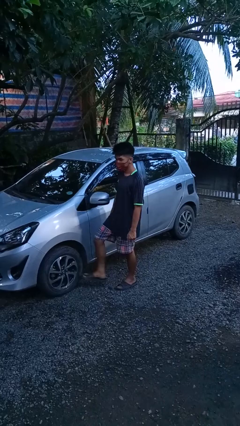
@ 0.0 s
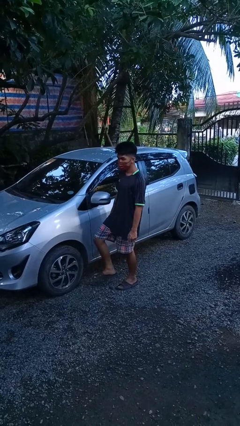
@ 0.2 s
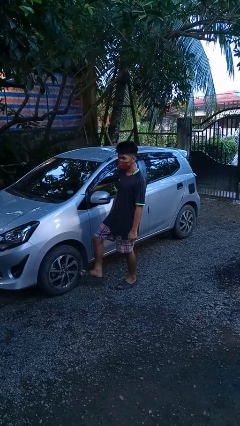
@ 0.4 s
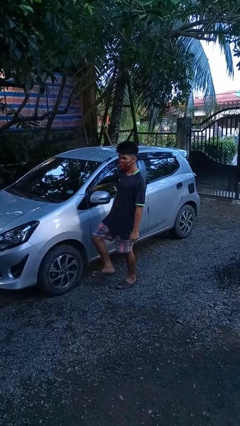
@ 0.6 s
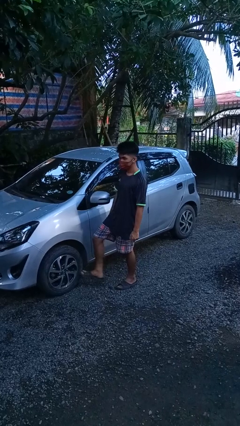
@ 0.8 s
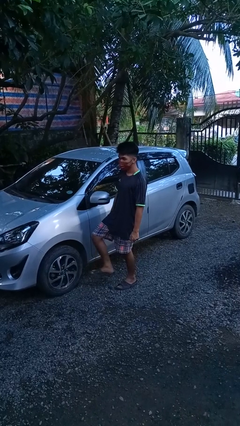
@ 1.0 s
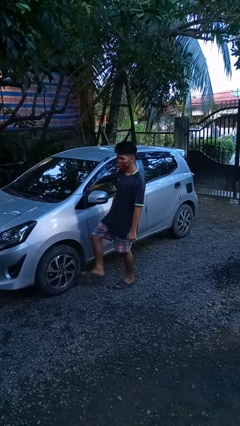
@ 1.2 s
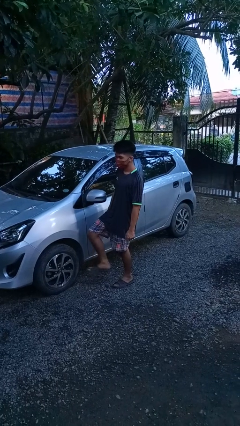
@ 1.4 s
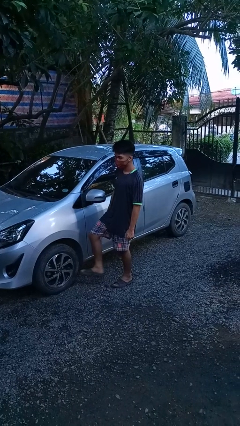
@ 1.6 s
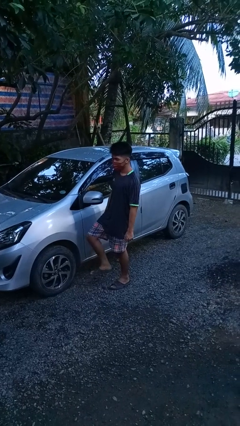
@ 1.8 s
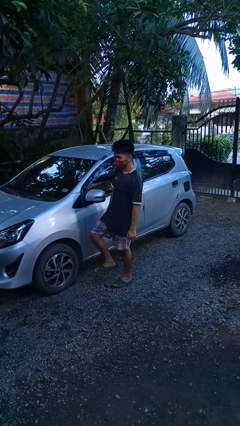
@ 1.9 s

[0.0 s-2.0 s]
person kicks car tires

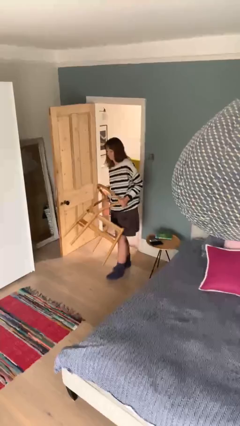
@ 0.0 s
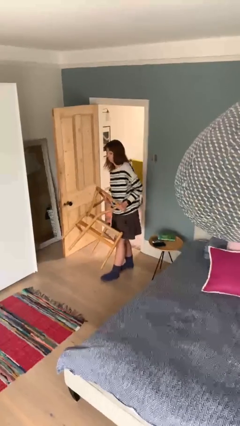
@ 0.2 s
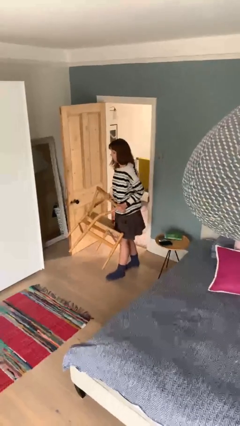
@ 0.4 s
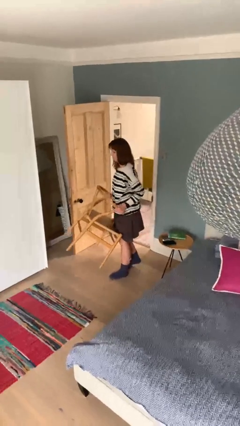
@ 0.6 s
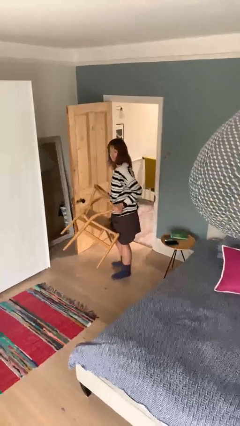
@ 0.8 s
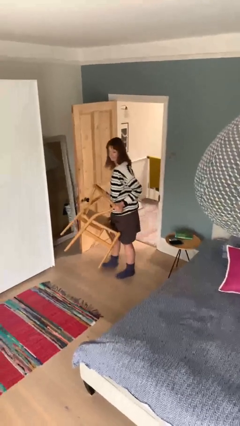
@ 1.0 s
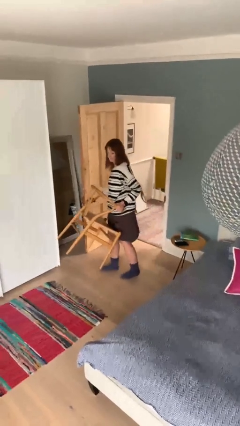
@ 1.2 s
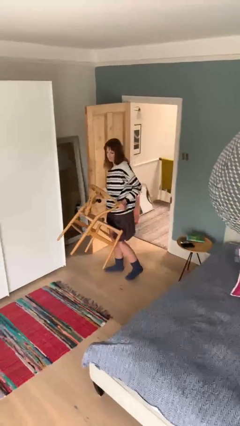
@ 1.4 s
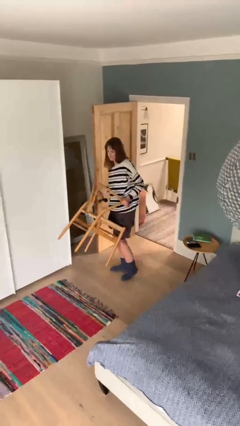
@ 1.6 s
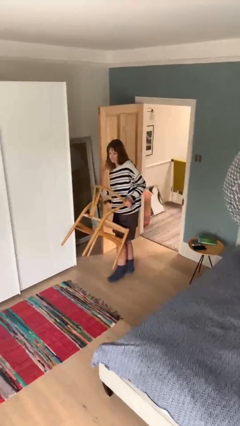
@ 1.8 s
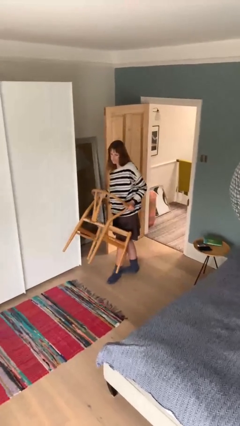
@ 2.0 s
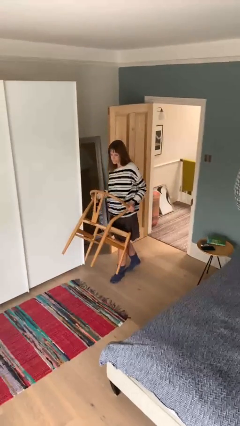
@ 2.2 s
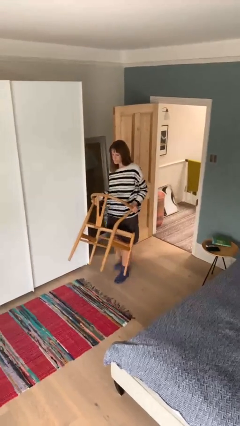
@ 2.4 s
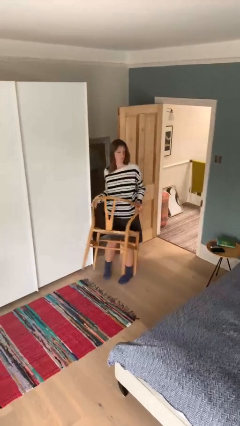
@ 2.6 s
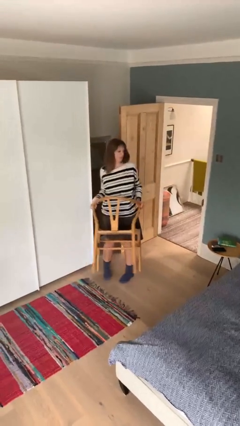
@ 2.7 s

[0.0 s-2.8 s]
person carries heavy object

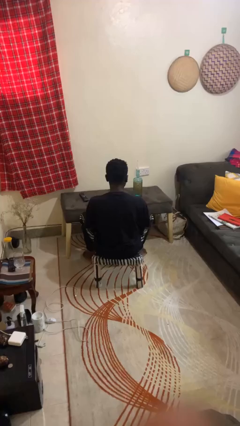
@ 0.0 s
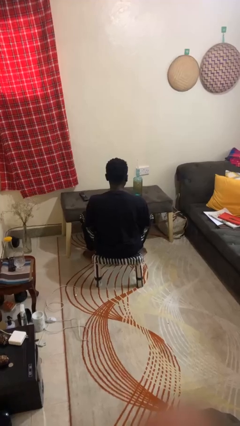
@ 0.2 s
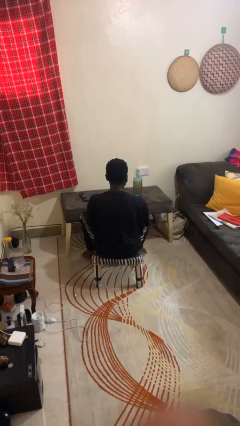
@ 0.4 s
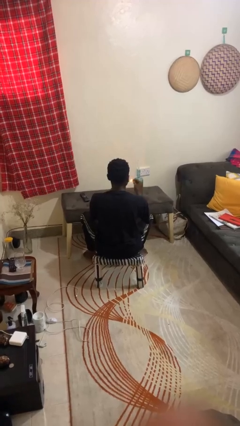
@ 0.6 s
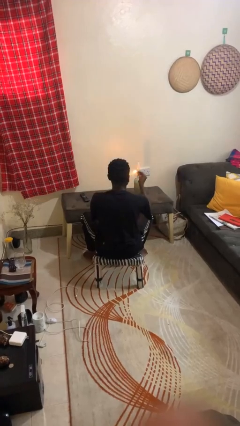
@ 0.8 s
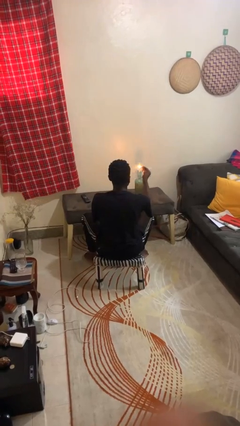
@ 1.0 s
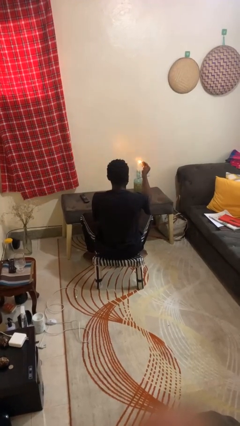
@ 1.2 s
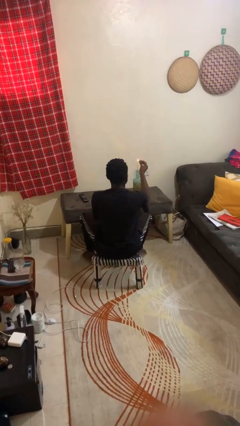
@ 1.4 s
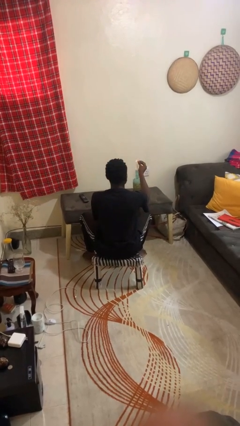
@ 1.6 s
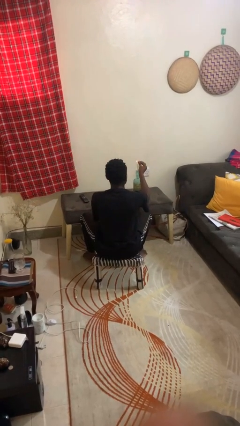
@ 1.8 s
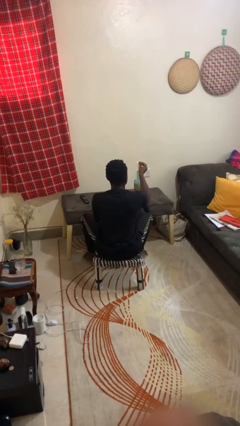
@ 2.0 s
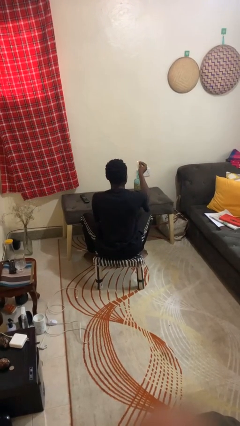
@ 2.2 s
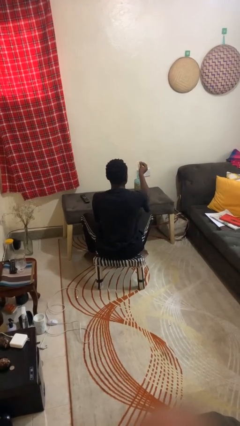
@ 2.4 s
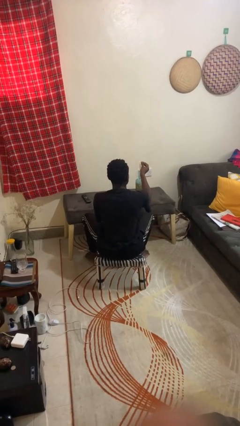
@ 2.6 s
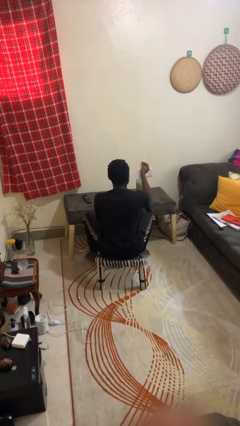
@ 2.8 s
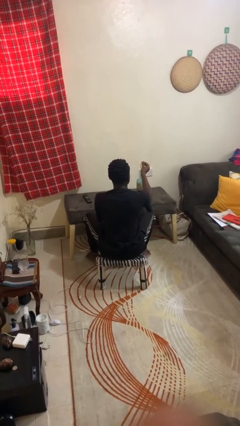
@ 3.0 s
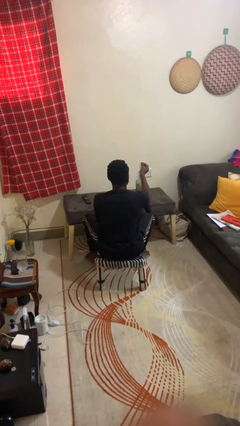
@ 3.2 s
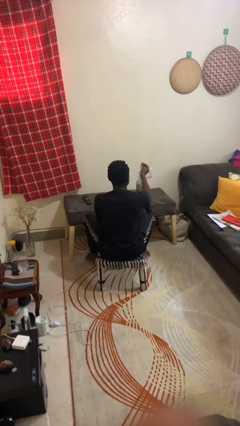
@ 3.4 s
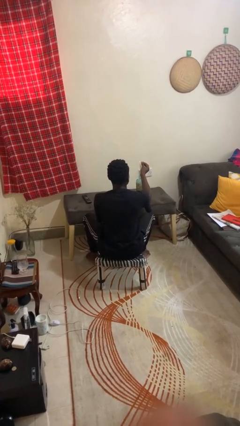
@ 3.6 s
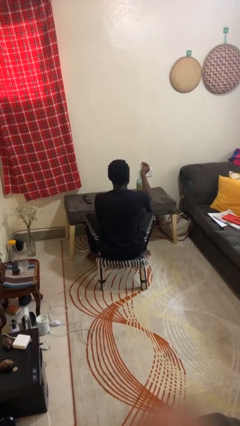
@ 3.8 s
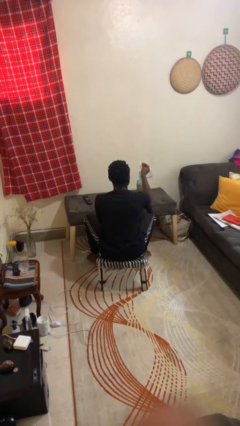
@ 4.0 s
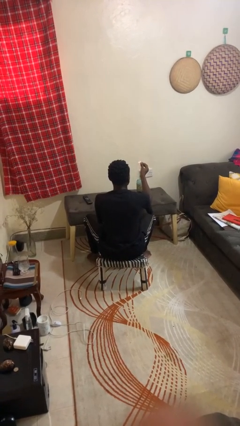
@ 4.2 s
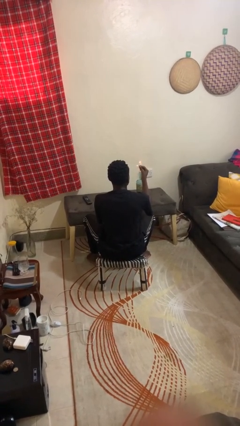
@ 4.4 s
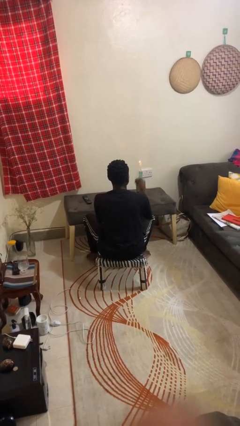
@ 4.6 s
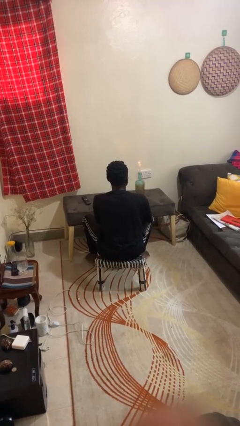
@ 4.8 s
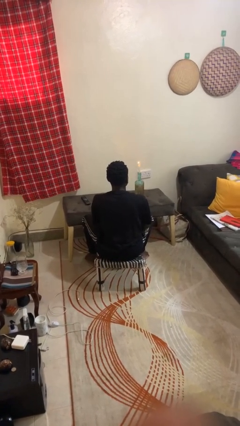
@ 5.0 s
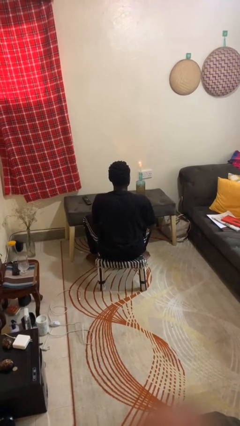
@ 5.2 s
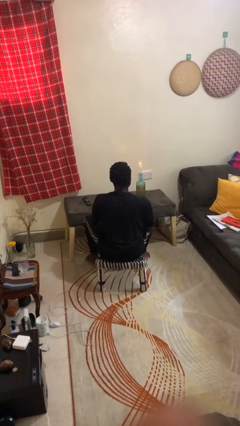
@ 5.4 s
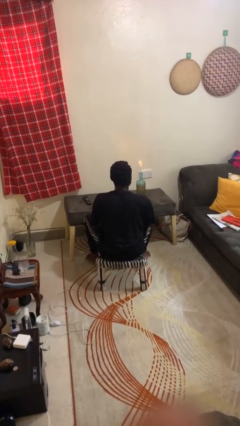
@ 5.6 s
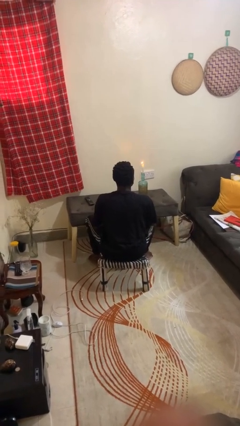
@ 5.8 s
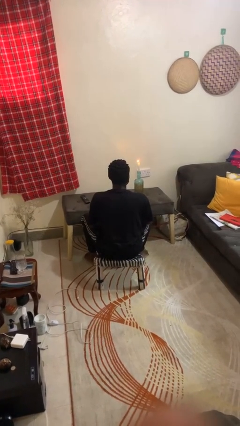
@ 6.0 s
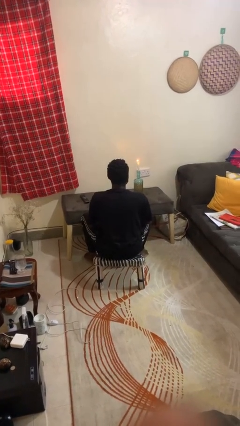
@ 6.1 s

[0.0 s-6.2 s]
person lights candle

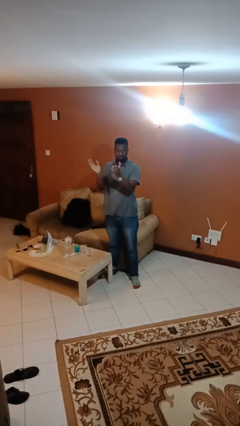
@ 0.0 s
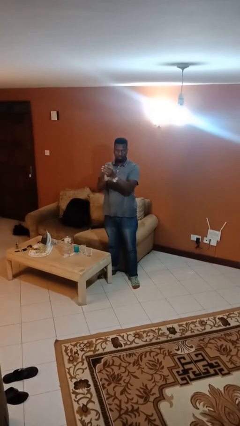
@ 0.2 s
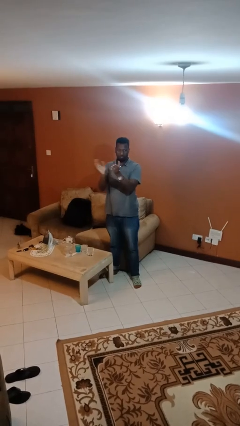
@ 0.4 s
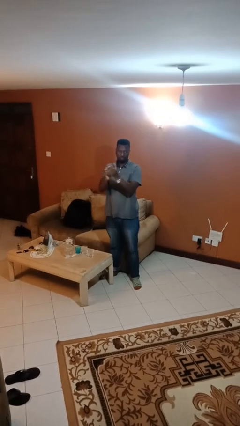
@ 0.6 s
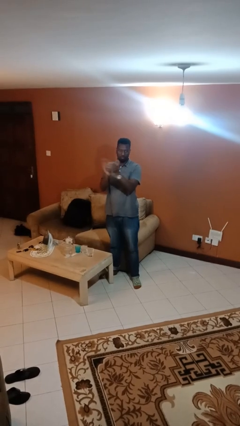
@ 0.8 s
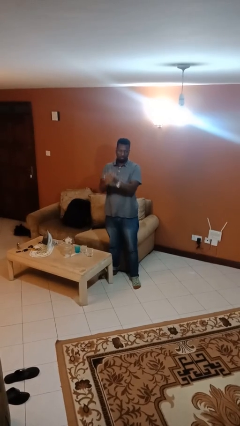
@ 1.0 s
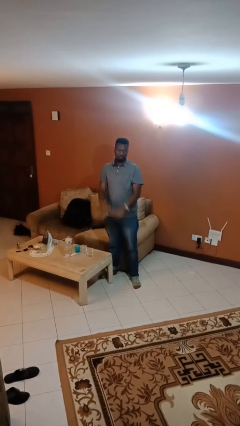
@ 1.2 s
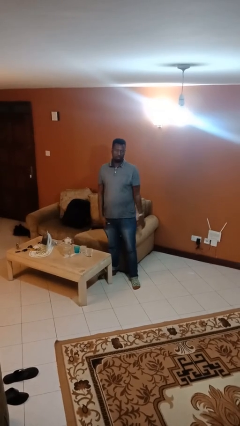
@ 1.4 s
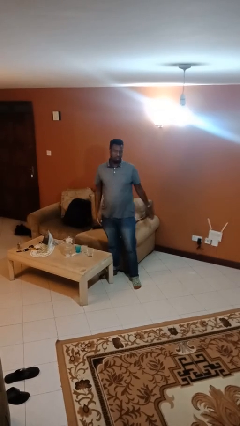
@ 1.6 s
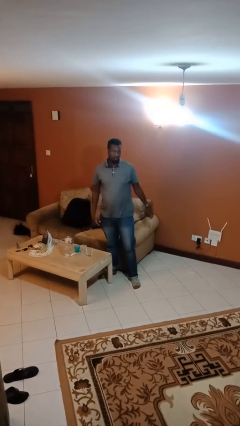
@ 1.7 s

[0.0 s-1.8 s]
person claps hands

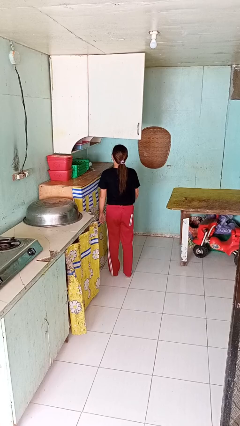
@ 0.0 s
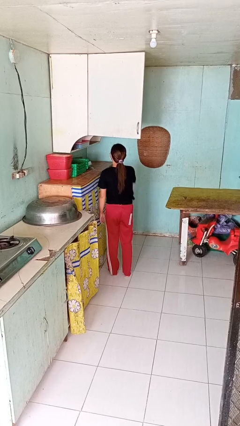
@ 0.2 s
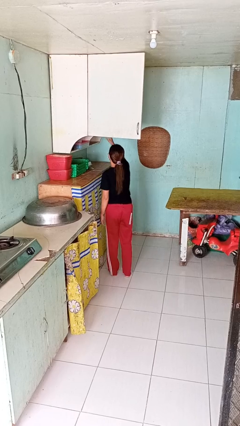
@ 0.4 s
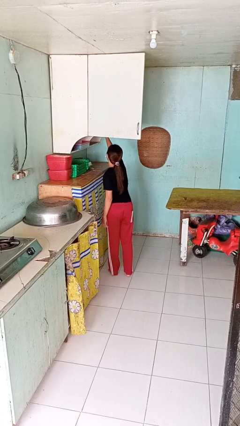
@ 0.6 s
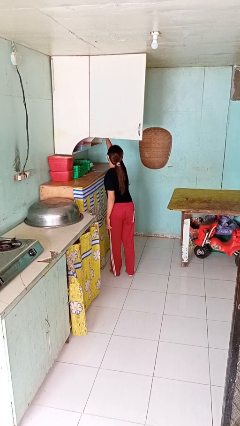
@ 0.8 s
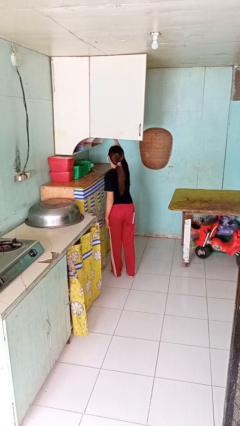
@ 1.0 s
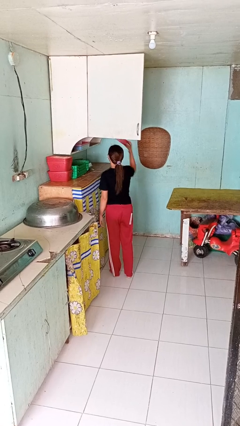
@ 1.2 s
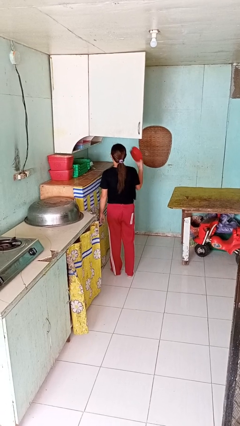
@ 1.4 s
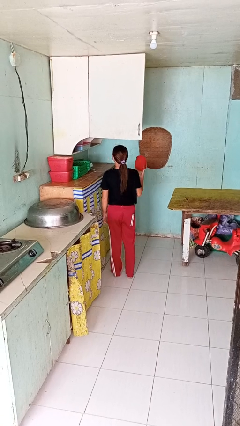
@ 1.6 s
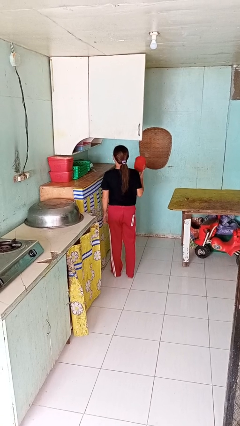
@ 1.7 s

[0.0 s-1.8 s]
person takes object from cabinet

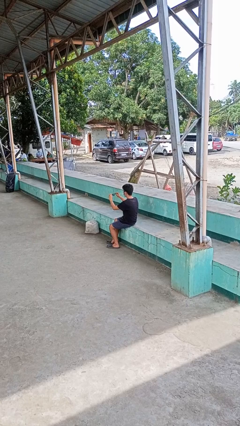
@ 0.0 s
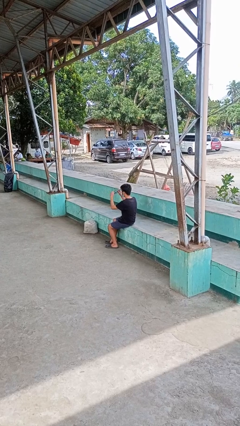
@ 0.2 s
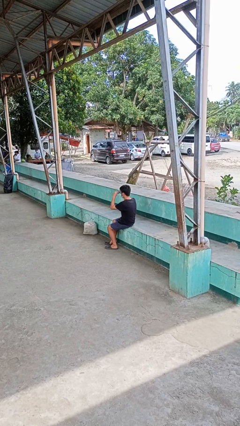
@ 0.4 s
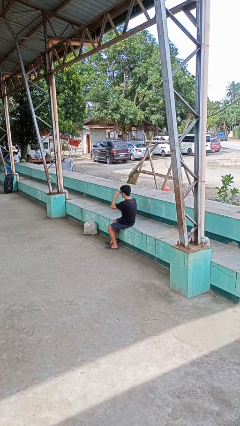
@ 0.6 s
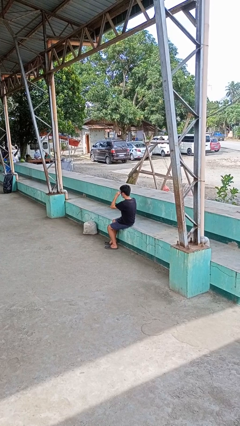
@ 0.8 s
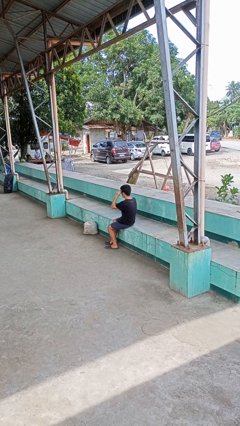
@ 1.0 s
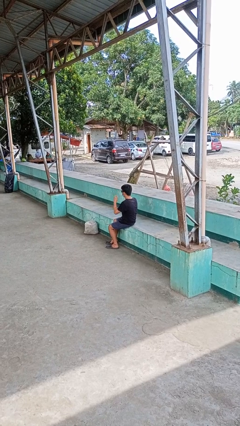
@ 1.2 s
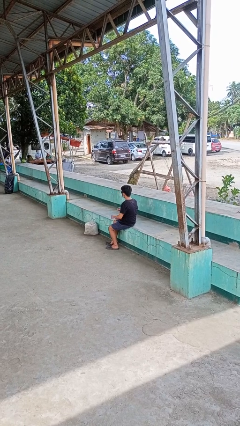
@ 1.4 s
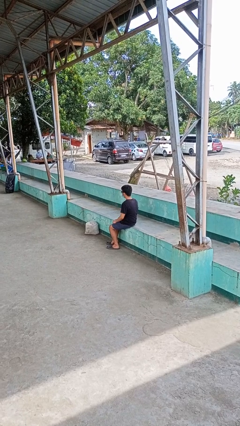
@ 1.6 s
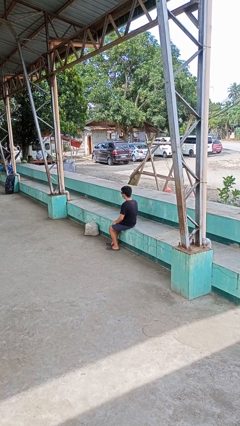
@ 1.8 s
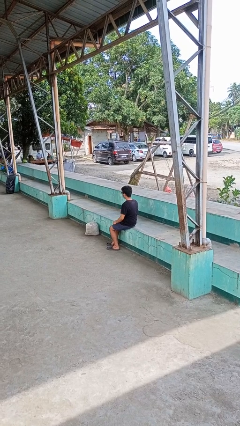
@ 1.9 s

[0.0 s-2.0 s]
person puts on sunglasses

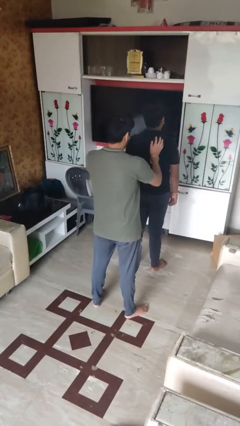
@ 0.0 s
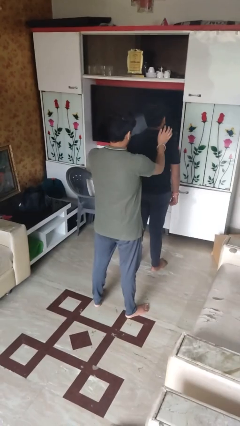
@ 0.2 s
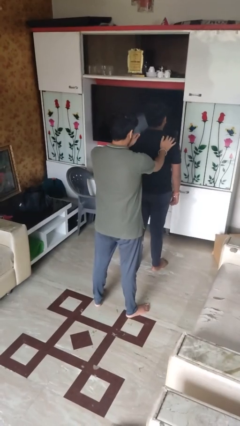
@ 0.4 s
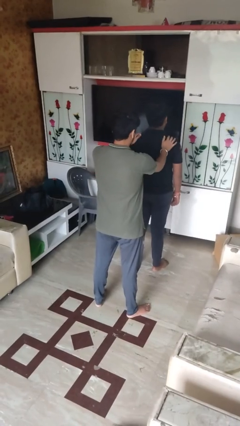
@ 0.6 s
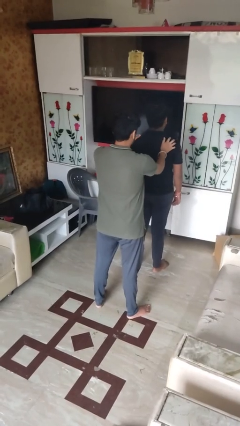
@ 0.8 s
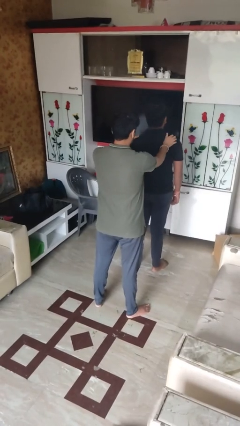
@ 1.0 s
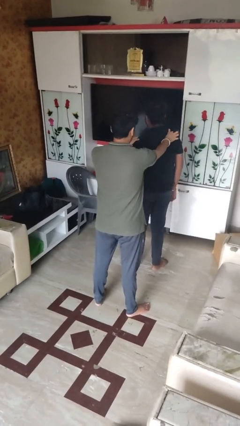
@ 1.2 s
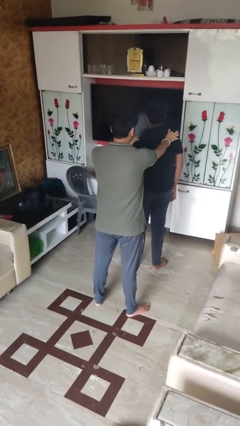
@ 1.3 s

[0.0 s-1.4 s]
person grabs person by shoulder
